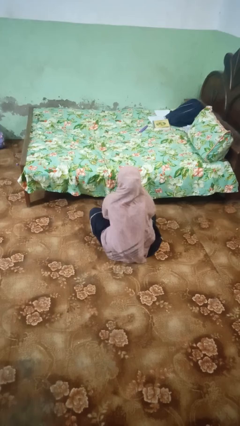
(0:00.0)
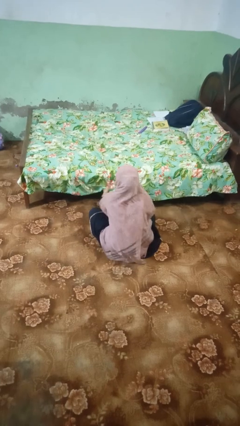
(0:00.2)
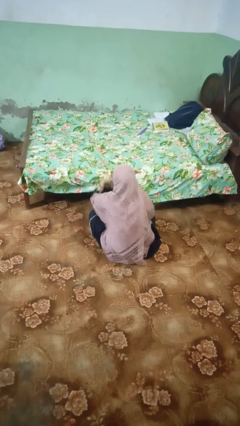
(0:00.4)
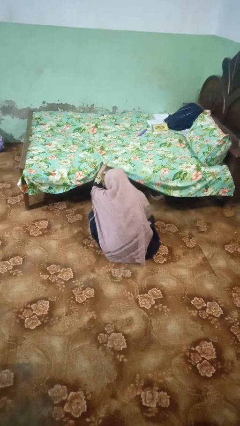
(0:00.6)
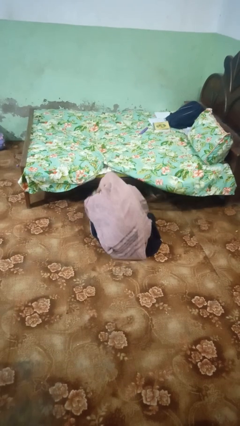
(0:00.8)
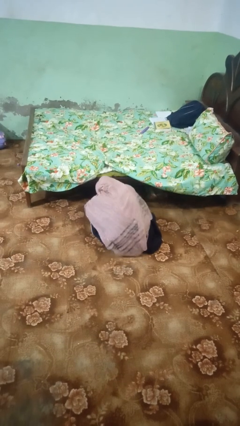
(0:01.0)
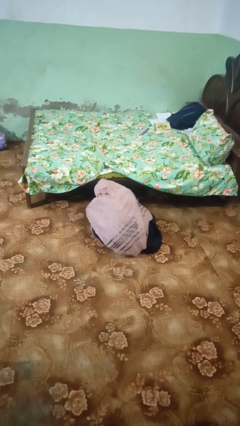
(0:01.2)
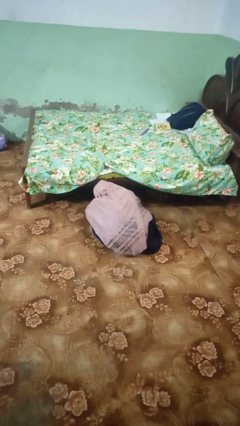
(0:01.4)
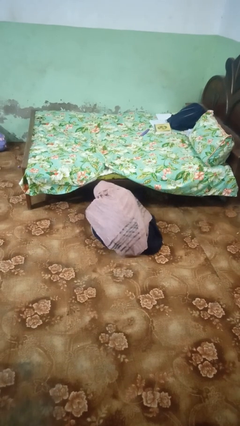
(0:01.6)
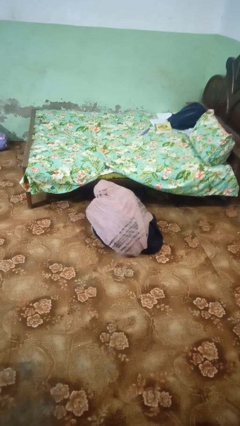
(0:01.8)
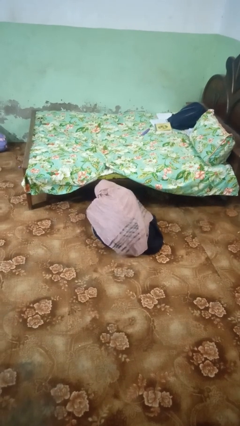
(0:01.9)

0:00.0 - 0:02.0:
person searches under bed

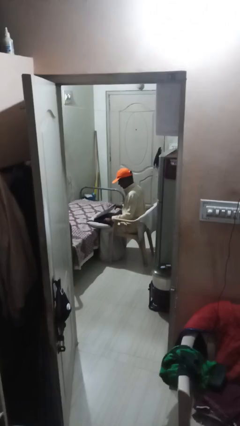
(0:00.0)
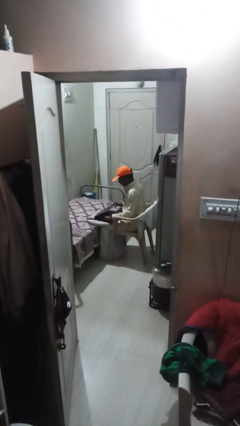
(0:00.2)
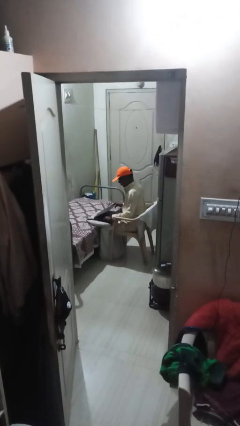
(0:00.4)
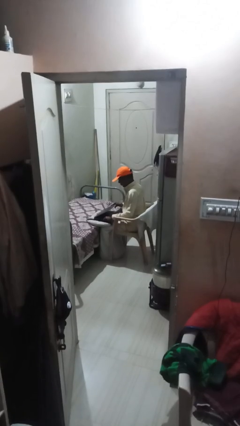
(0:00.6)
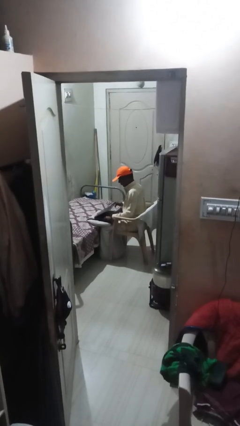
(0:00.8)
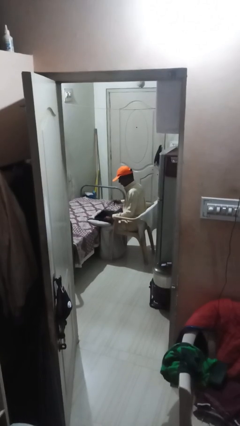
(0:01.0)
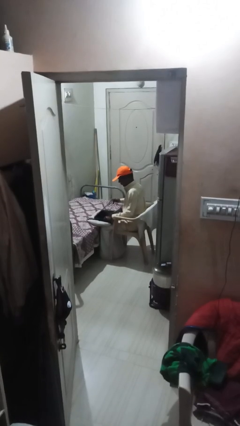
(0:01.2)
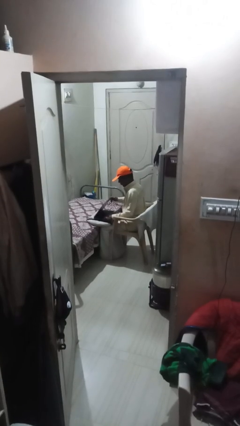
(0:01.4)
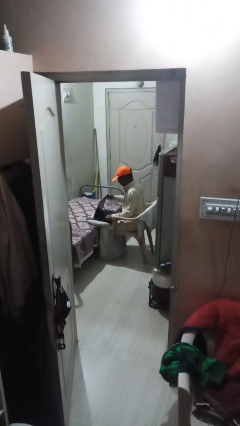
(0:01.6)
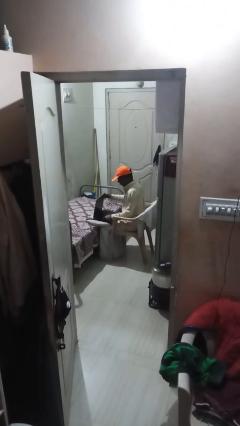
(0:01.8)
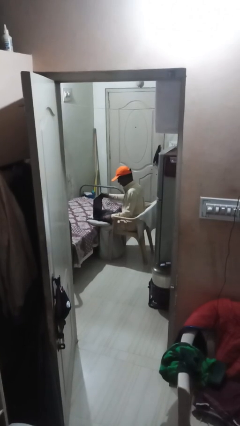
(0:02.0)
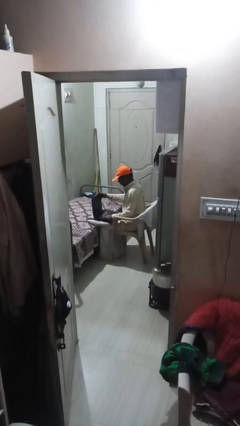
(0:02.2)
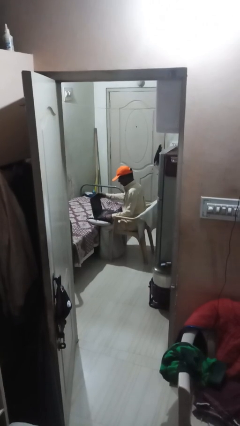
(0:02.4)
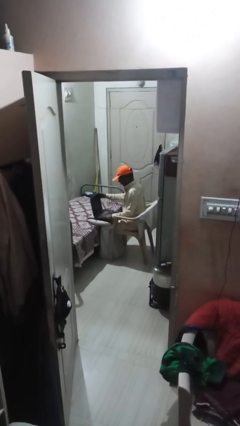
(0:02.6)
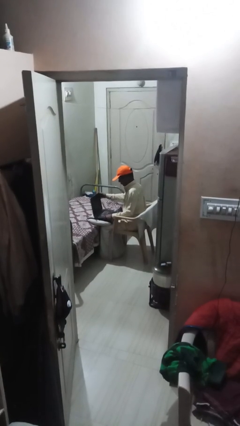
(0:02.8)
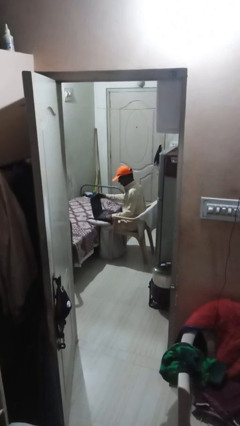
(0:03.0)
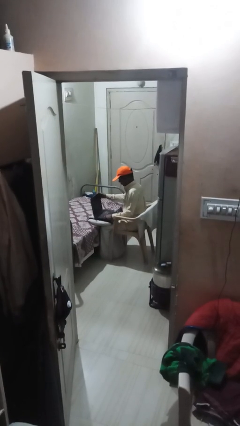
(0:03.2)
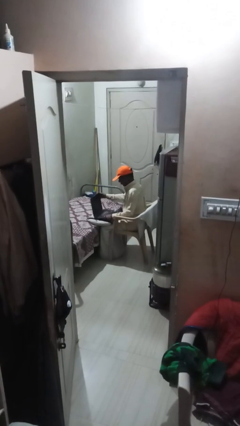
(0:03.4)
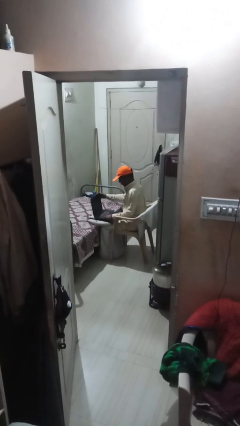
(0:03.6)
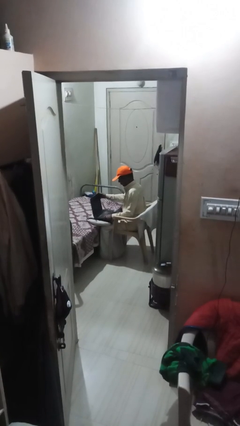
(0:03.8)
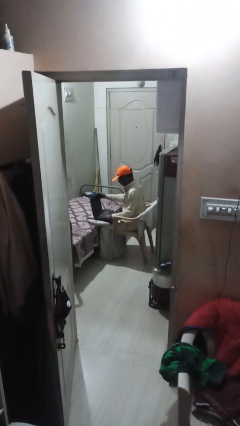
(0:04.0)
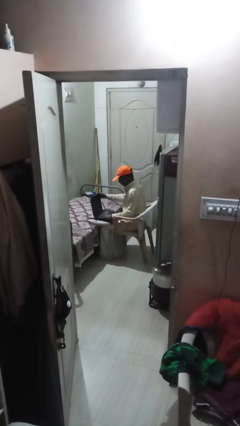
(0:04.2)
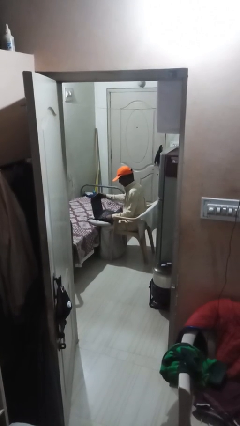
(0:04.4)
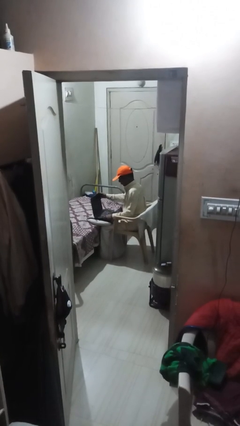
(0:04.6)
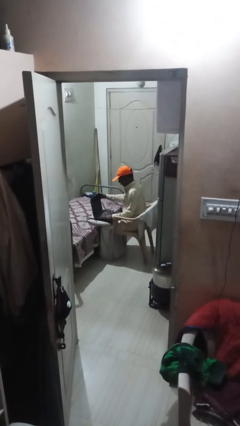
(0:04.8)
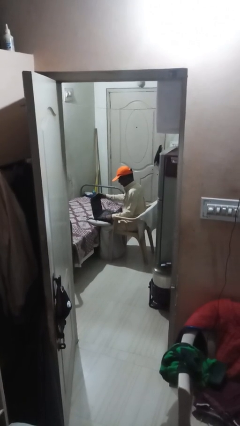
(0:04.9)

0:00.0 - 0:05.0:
person interacts with laptop

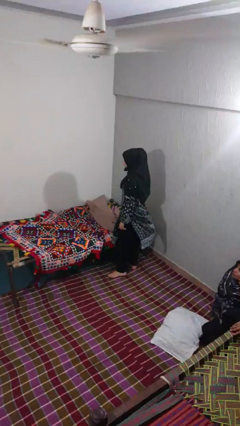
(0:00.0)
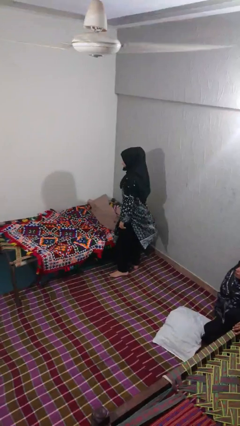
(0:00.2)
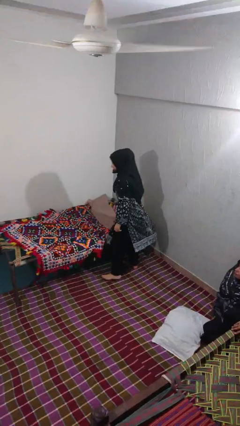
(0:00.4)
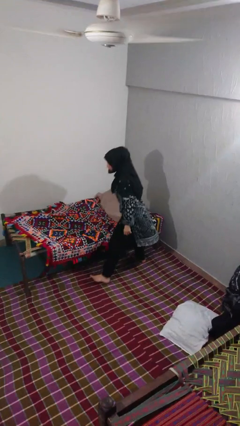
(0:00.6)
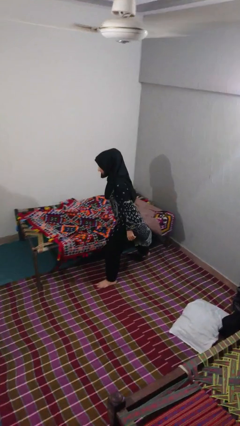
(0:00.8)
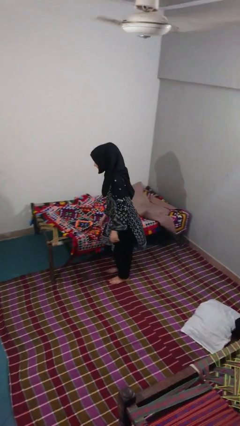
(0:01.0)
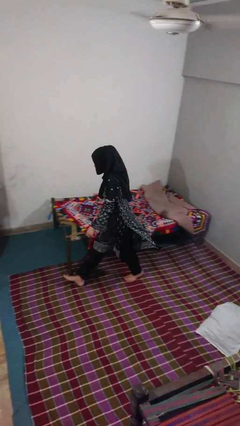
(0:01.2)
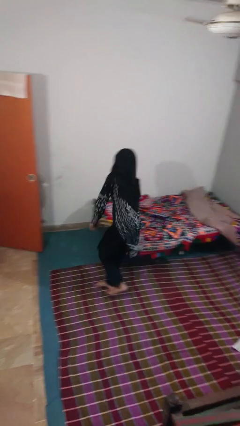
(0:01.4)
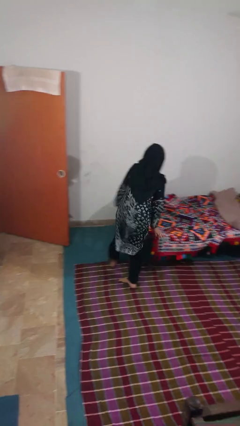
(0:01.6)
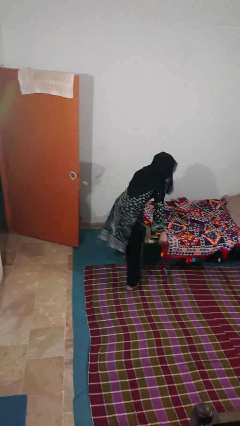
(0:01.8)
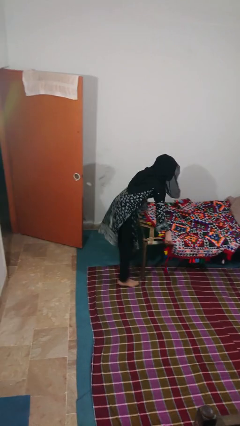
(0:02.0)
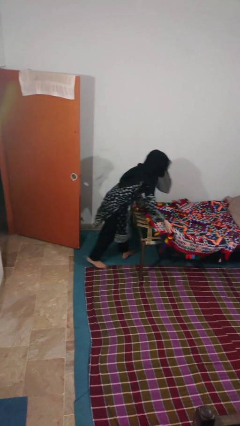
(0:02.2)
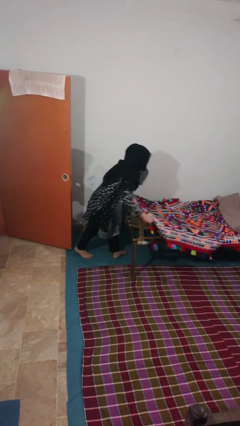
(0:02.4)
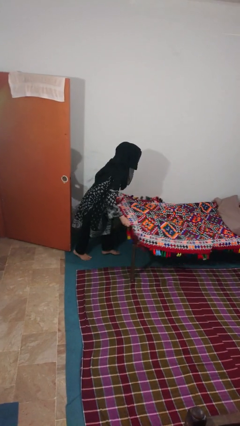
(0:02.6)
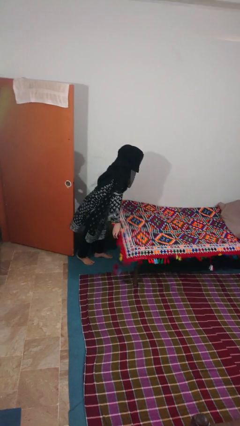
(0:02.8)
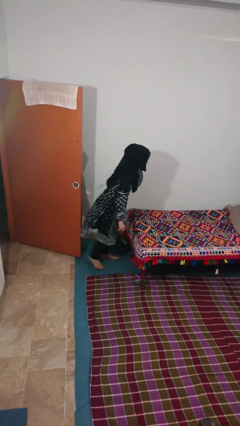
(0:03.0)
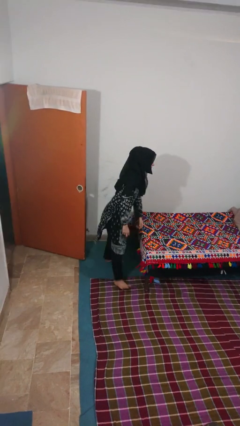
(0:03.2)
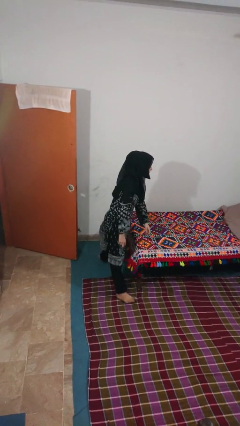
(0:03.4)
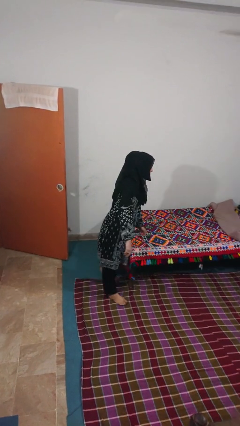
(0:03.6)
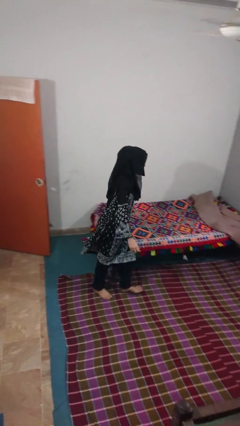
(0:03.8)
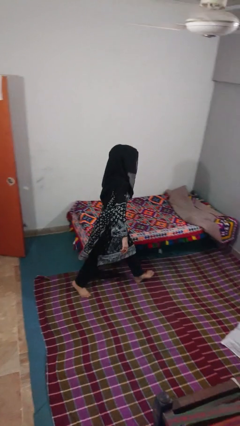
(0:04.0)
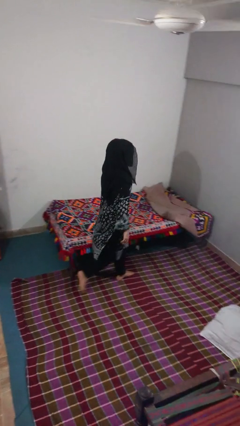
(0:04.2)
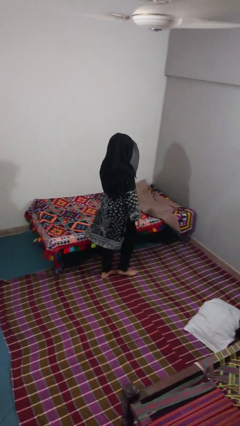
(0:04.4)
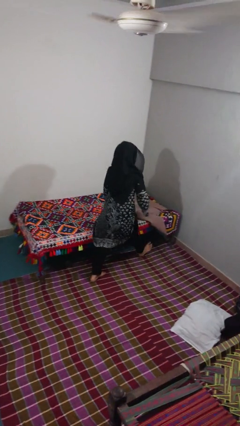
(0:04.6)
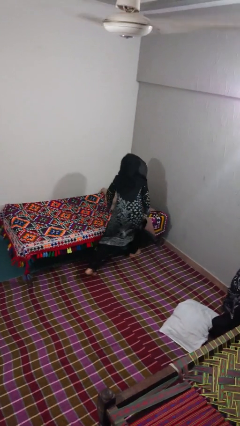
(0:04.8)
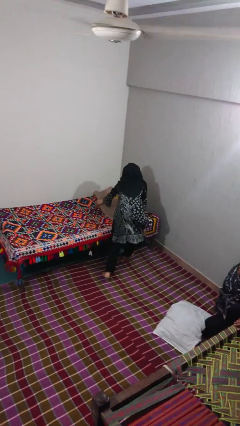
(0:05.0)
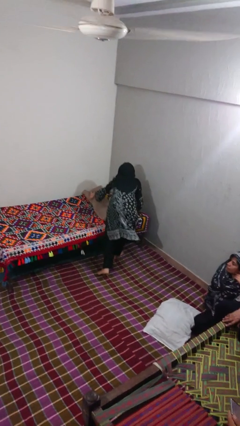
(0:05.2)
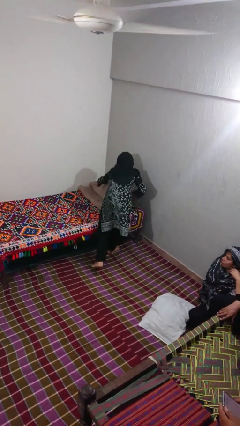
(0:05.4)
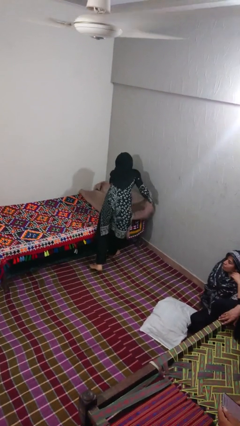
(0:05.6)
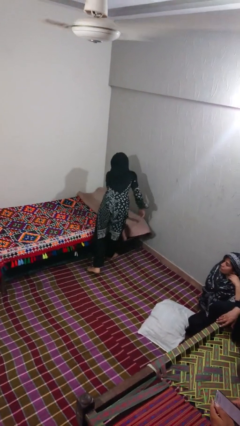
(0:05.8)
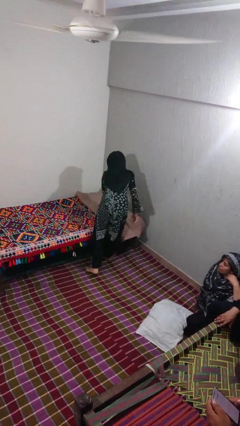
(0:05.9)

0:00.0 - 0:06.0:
person makes bed

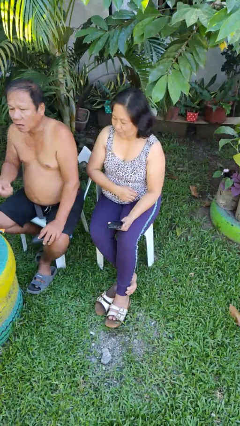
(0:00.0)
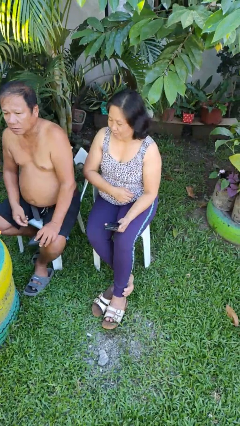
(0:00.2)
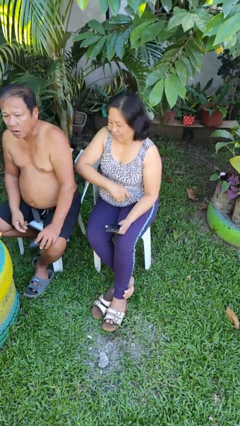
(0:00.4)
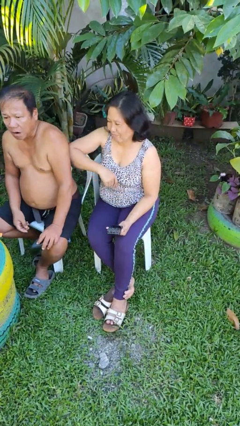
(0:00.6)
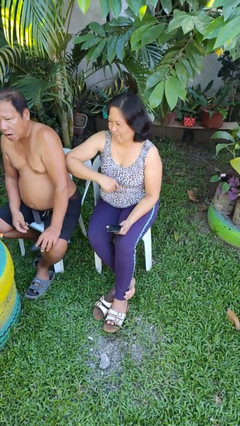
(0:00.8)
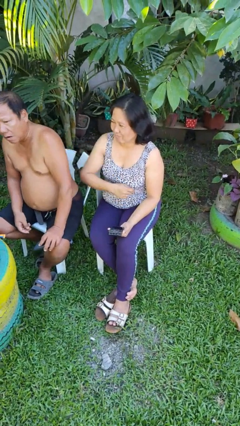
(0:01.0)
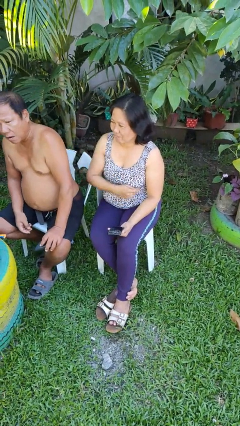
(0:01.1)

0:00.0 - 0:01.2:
person nudges person with elbow

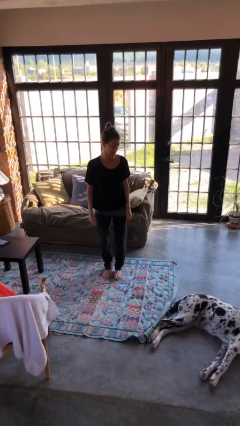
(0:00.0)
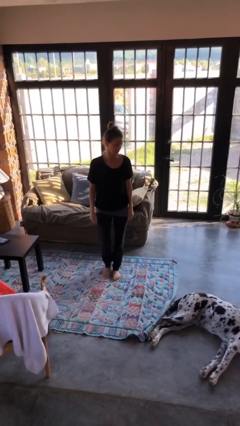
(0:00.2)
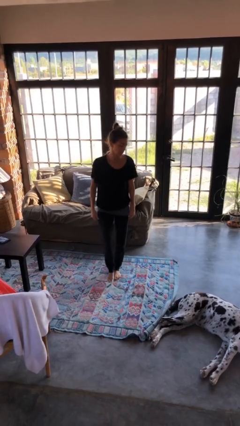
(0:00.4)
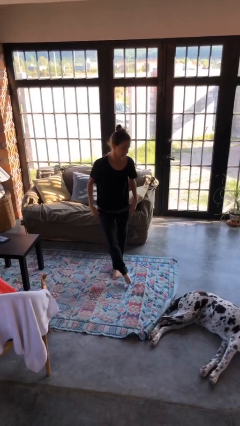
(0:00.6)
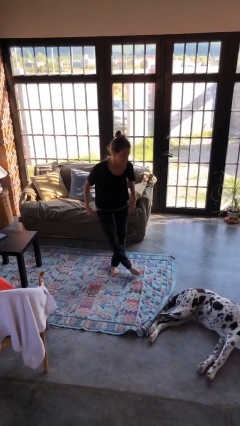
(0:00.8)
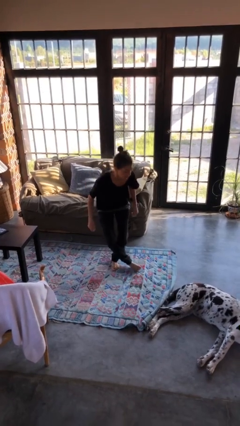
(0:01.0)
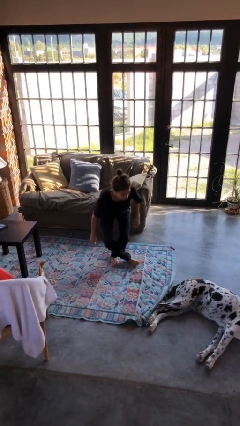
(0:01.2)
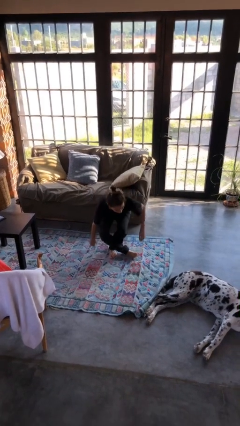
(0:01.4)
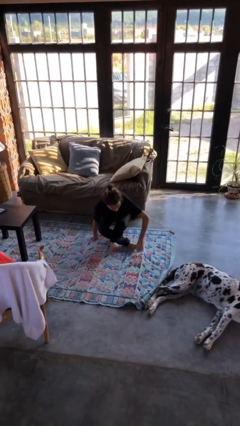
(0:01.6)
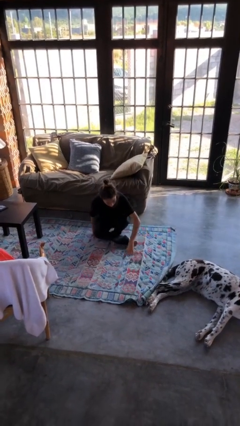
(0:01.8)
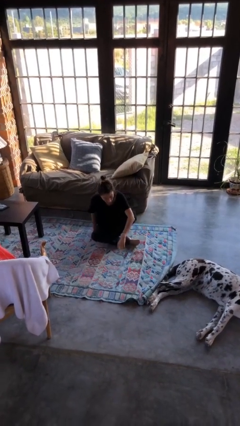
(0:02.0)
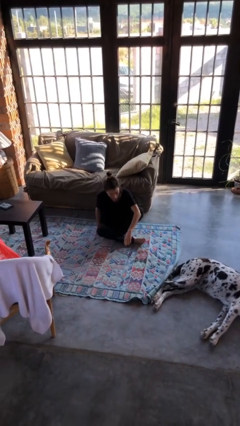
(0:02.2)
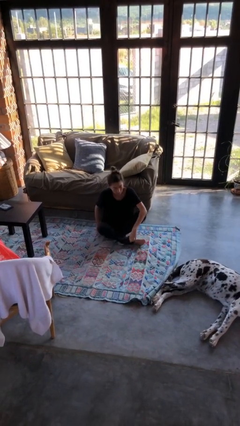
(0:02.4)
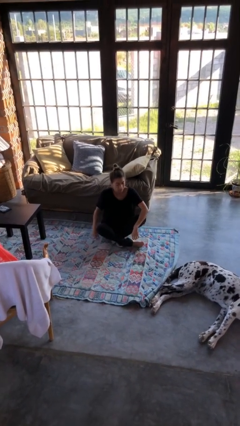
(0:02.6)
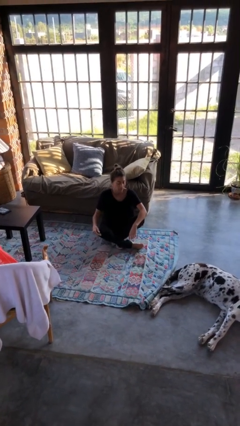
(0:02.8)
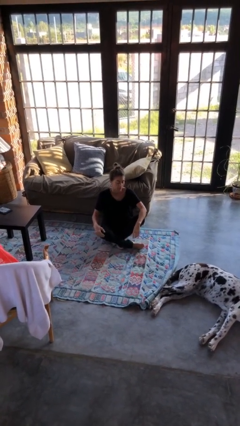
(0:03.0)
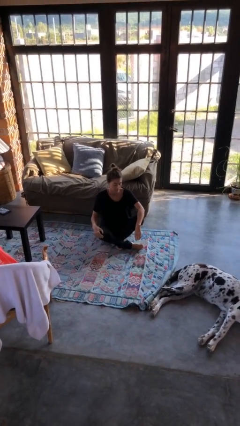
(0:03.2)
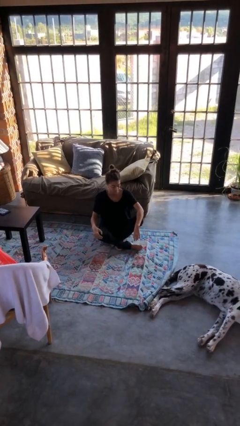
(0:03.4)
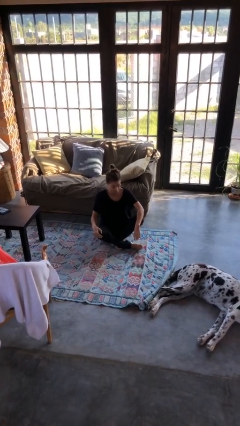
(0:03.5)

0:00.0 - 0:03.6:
person sits crisscross

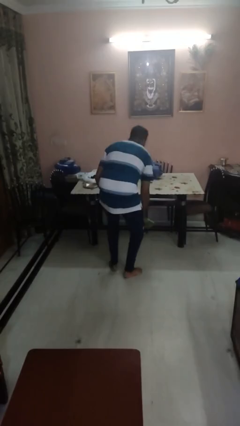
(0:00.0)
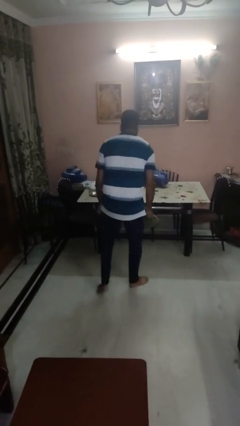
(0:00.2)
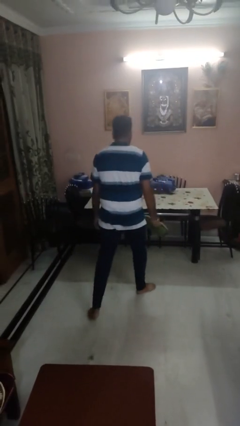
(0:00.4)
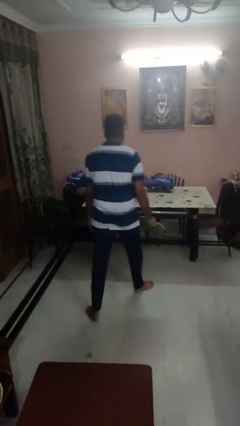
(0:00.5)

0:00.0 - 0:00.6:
person picks up object from floor
